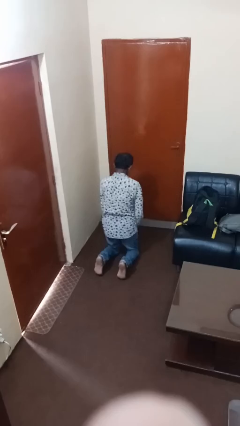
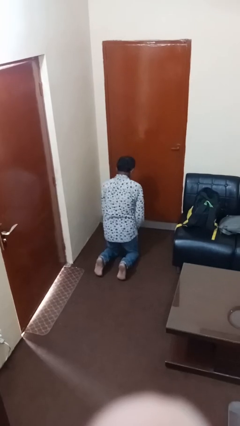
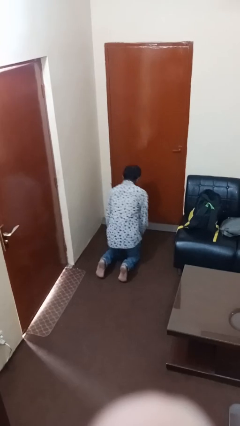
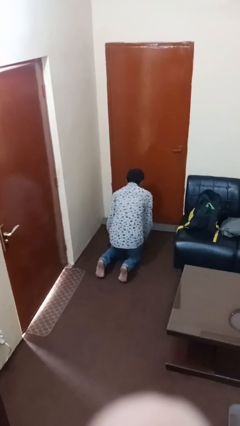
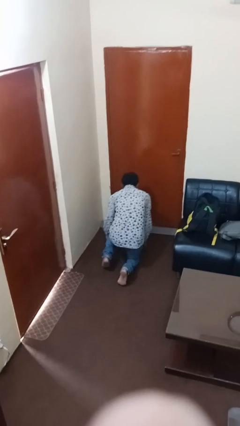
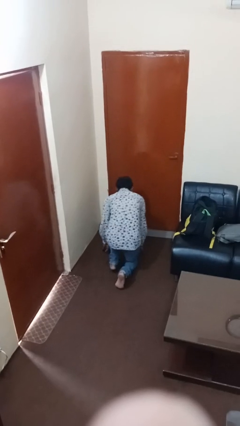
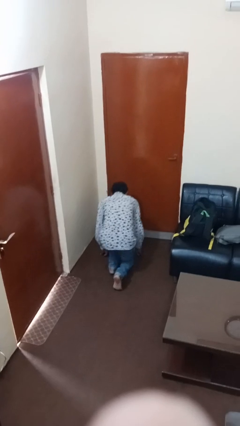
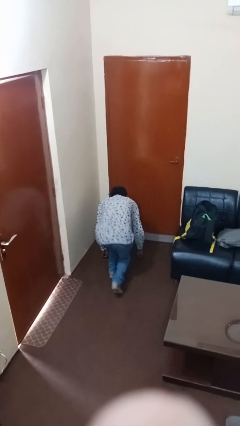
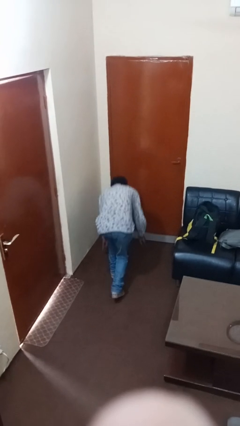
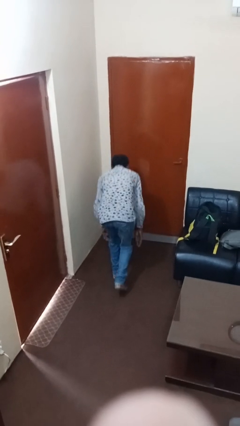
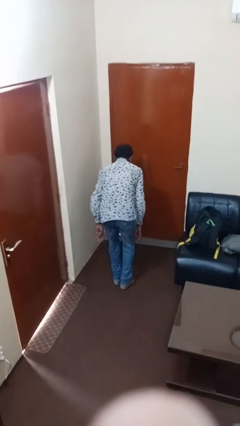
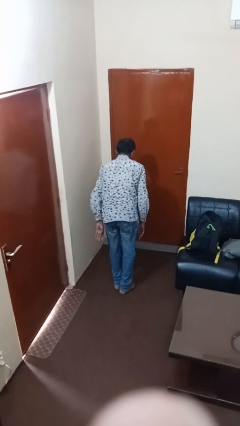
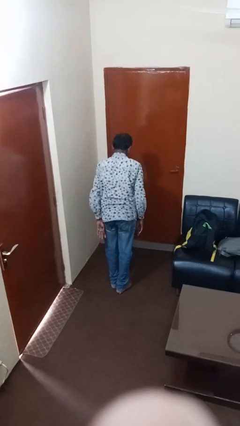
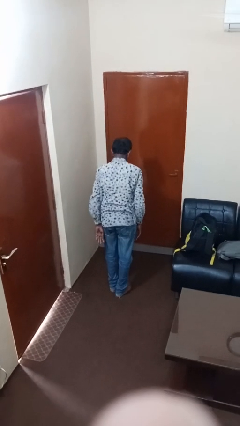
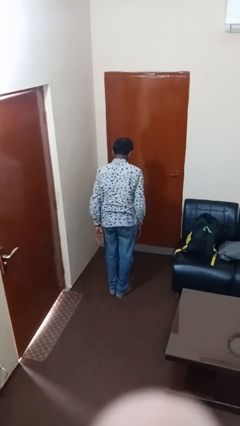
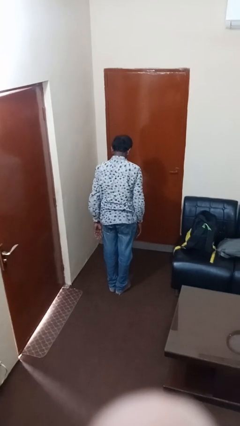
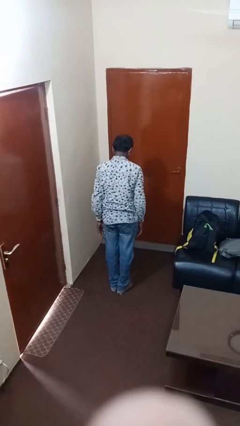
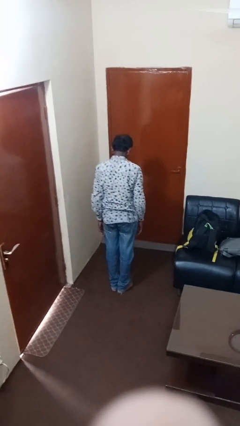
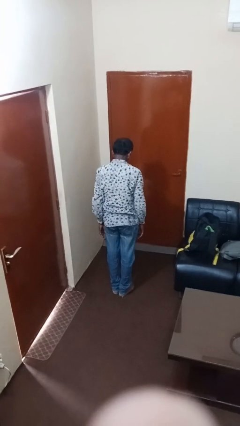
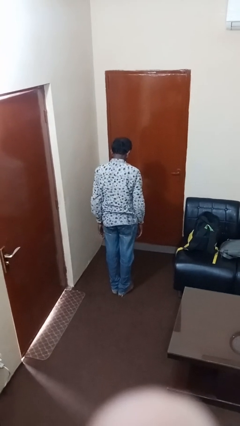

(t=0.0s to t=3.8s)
person stands up from floor

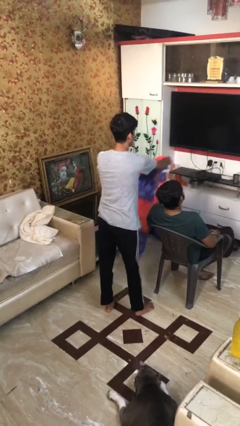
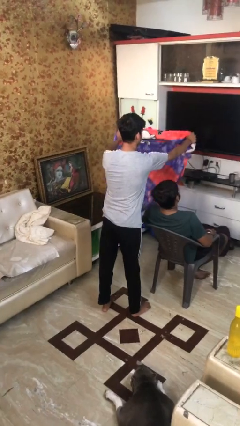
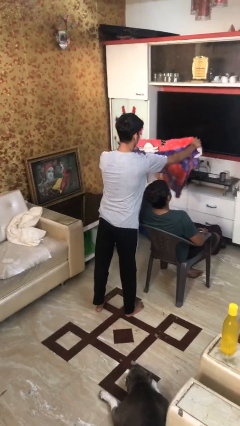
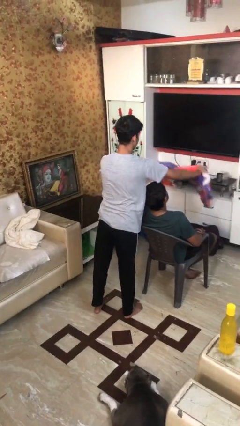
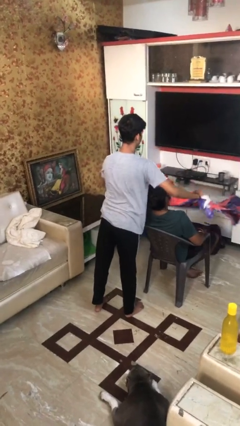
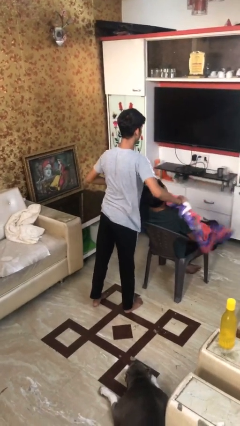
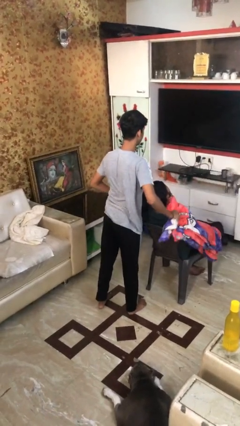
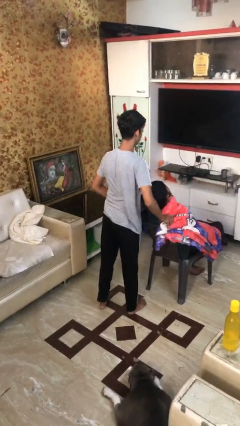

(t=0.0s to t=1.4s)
person covers friend with blanket

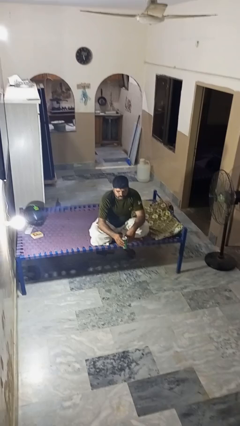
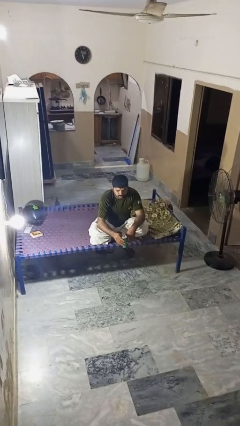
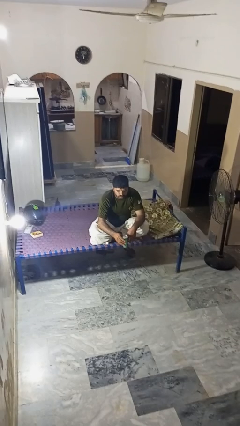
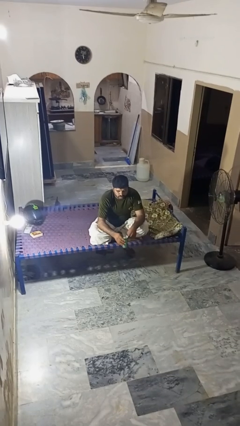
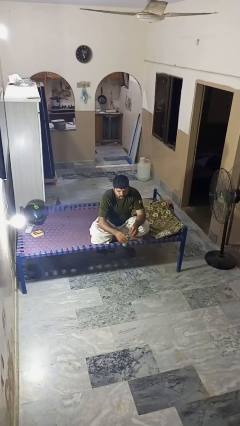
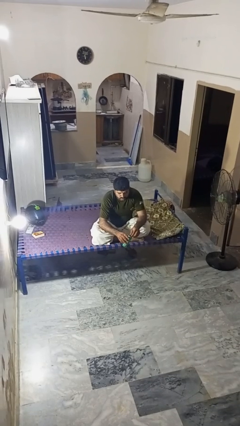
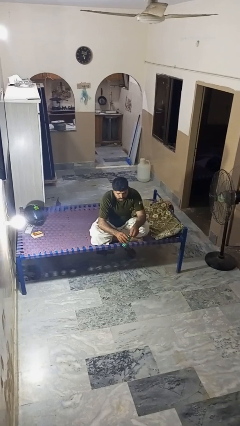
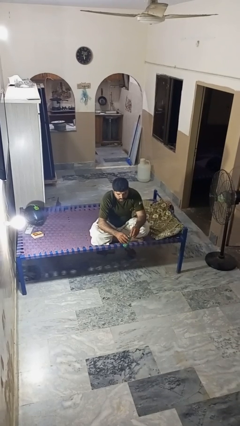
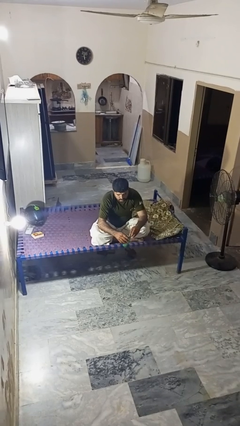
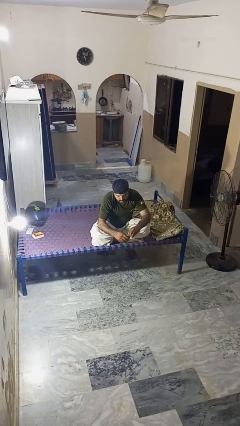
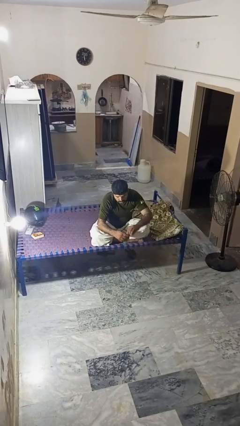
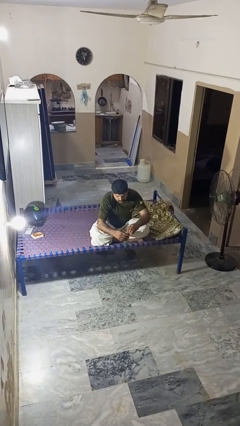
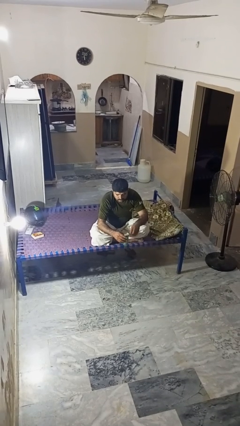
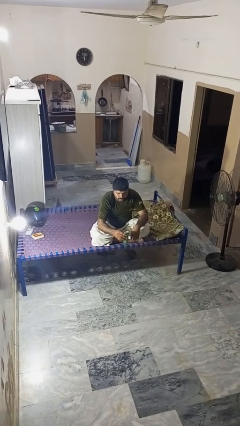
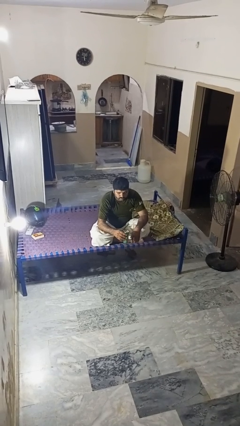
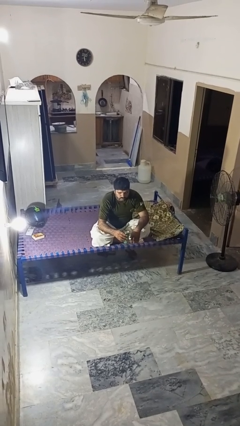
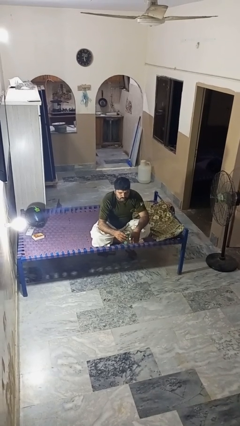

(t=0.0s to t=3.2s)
person opens beverage can

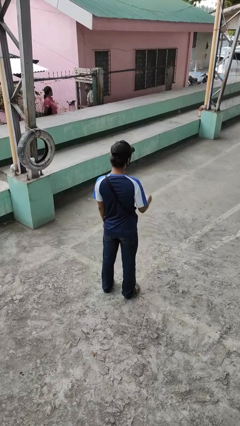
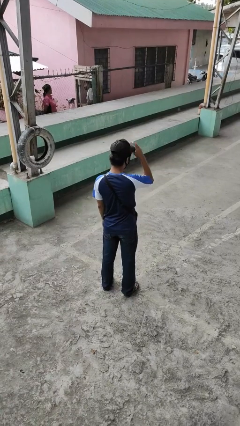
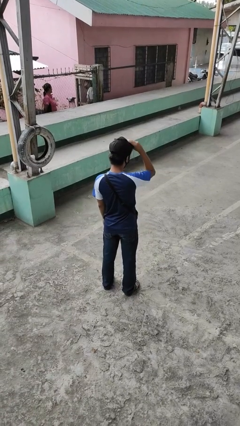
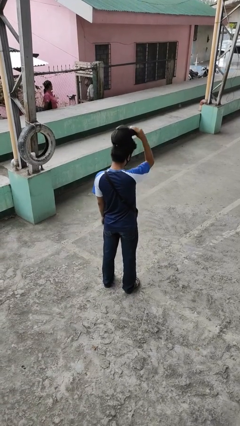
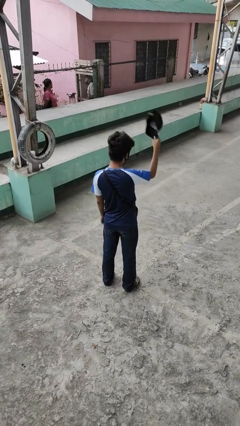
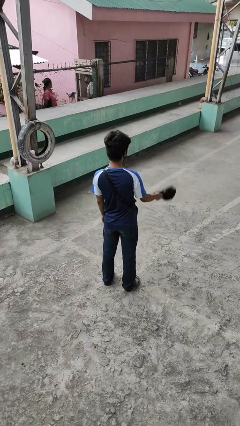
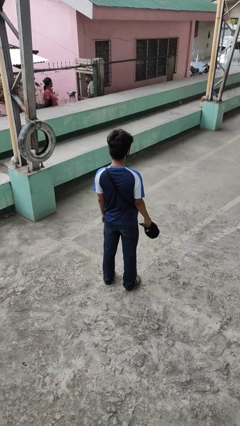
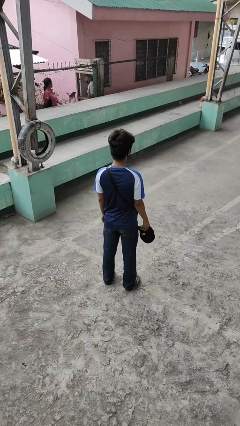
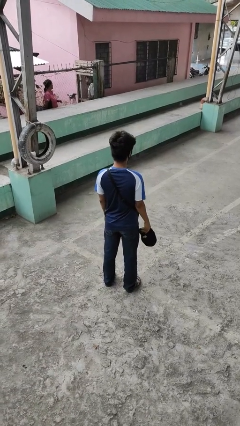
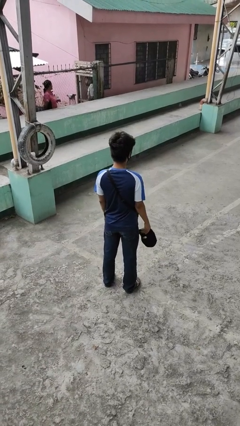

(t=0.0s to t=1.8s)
person takes off hat

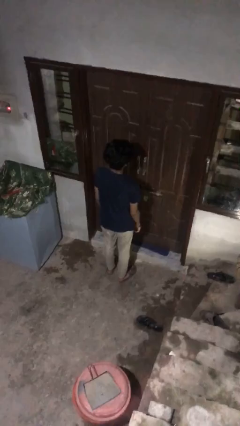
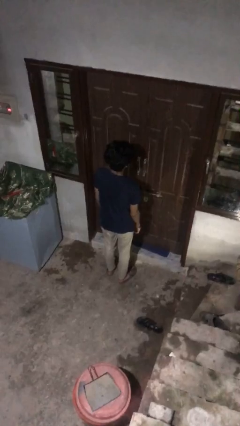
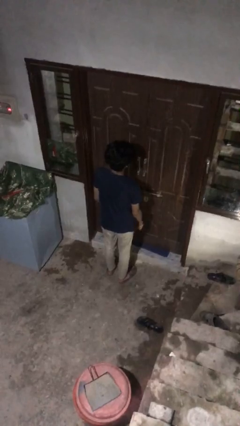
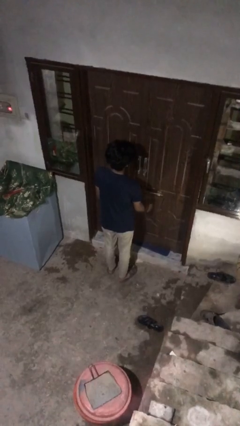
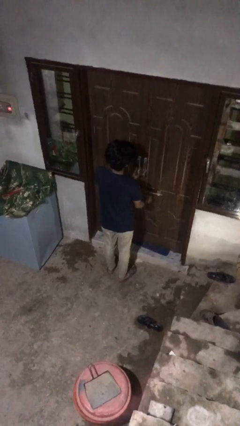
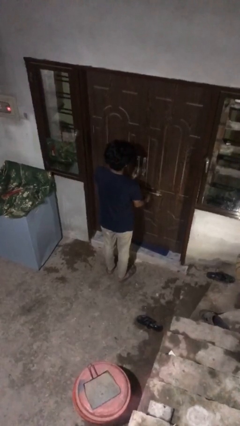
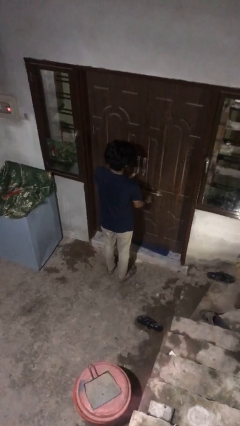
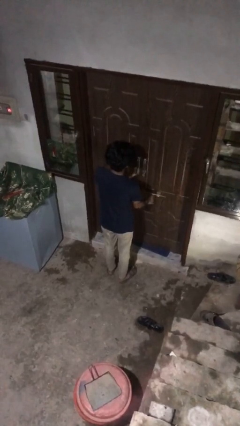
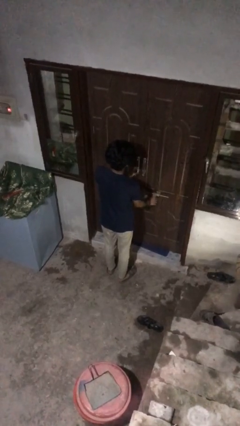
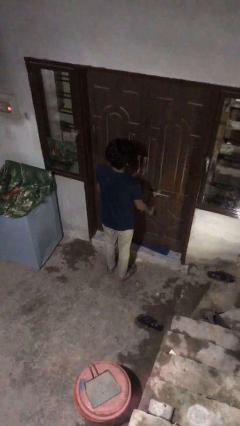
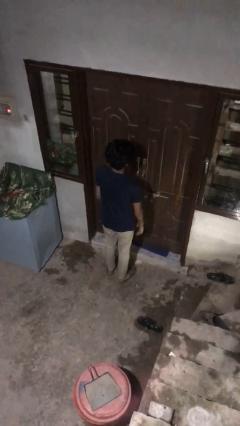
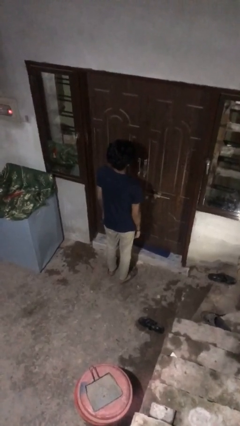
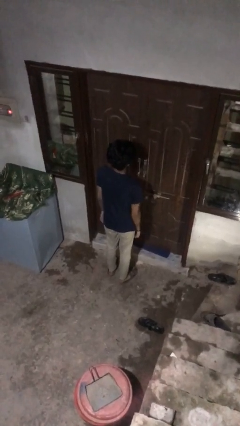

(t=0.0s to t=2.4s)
person unlocks door with keys

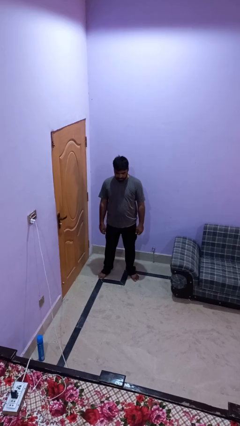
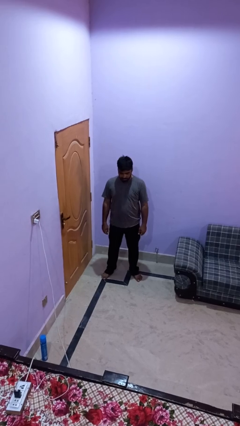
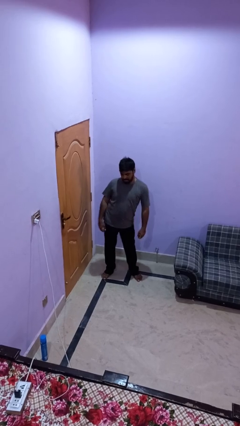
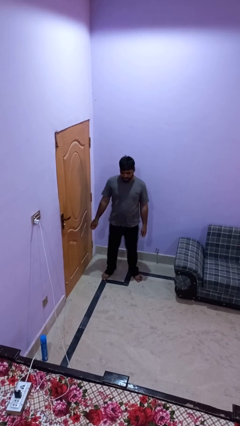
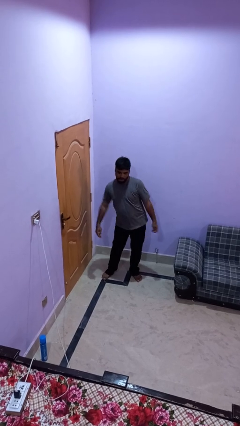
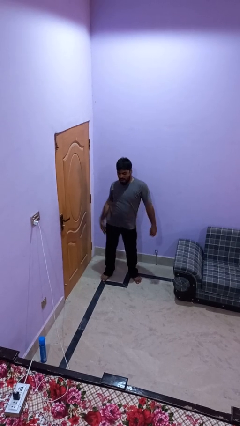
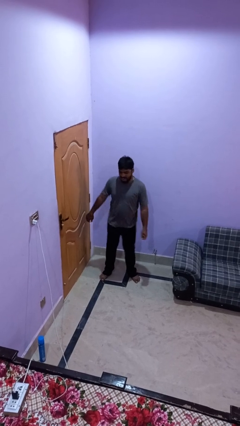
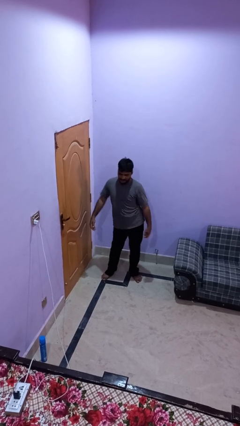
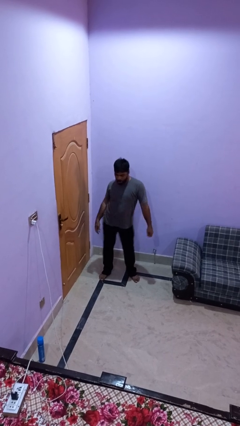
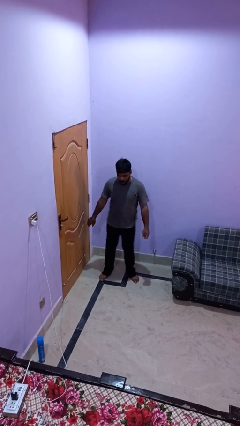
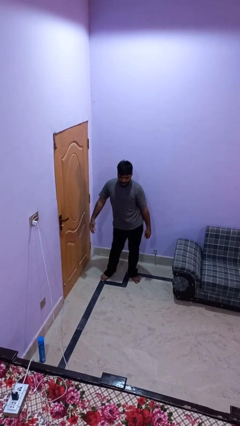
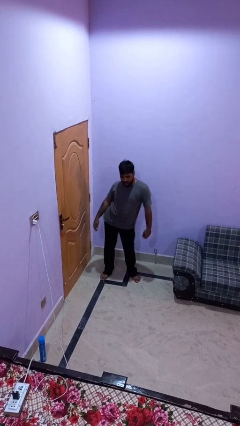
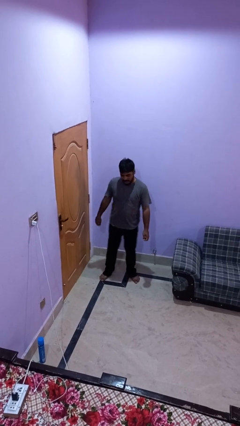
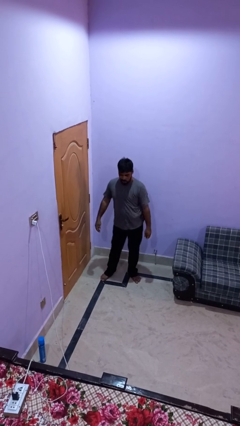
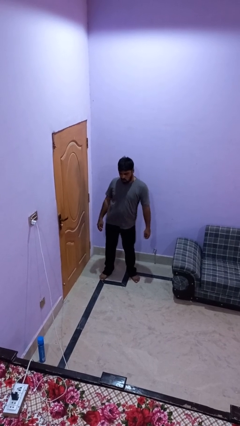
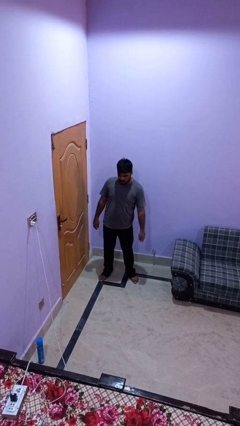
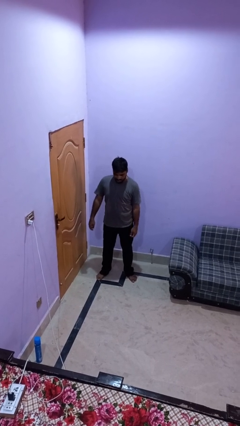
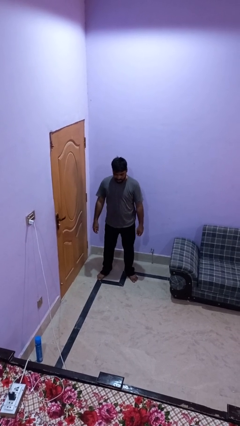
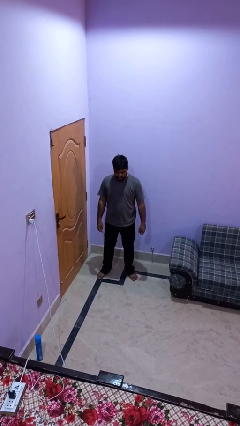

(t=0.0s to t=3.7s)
person wiggles hips

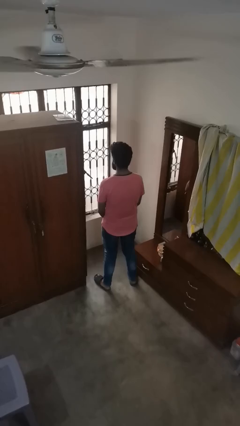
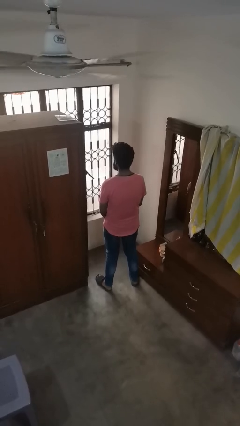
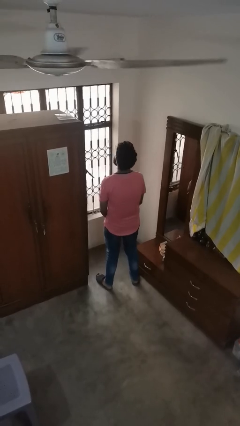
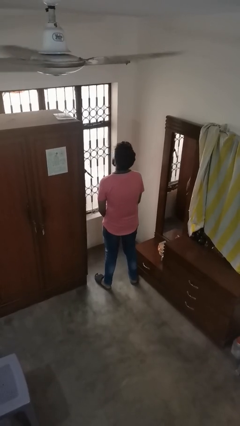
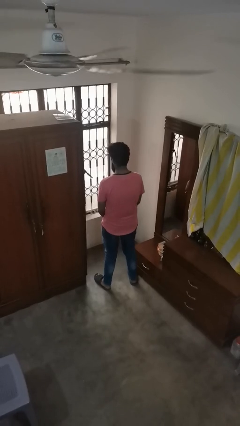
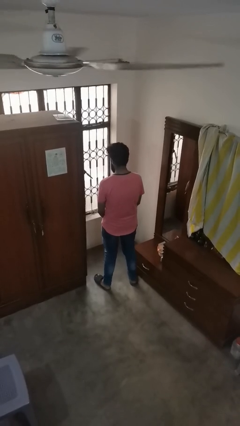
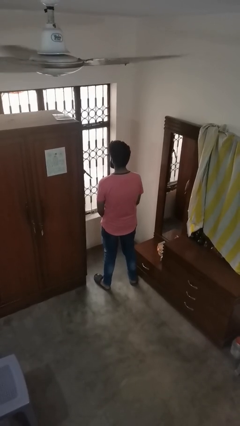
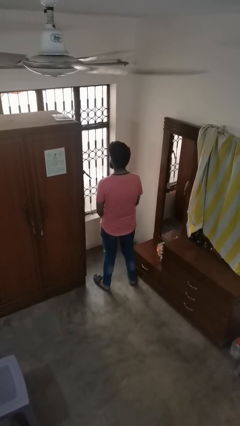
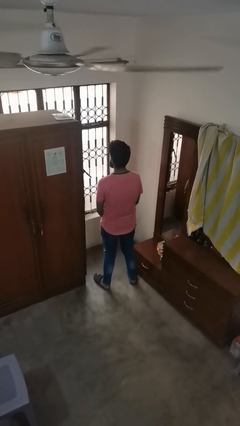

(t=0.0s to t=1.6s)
person nods head
